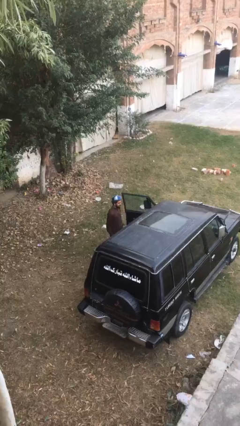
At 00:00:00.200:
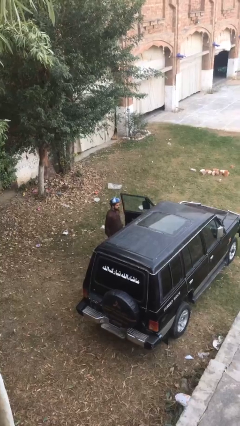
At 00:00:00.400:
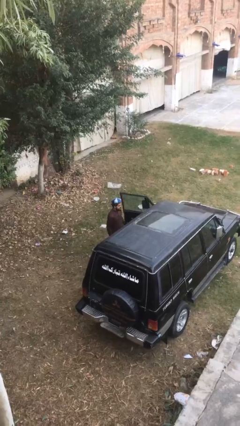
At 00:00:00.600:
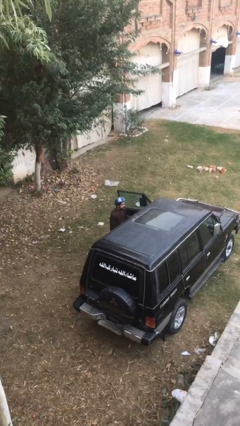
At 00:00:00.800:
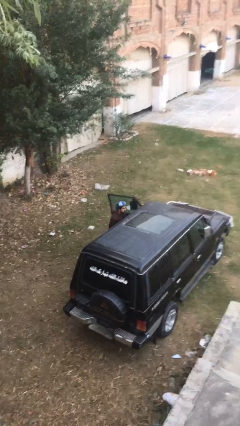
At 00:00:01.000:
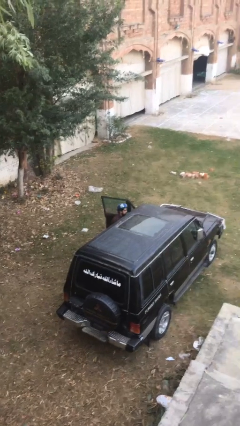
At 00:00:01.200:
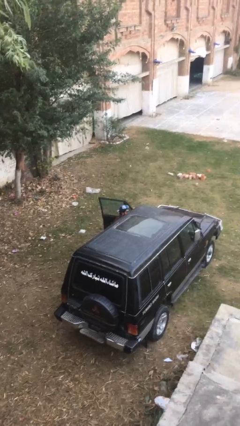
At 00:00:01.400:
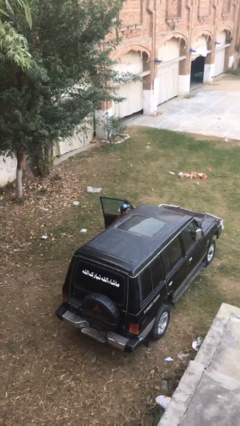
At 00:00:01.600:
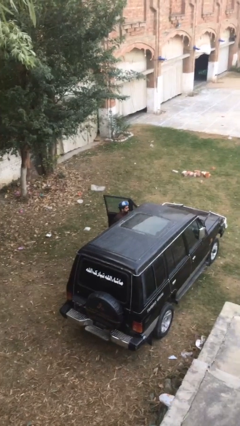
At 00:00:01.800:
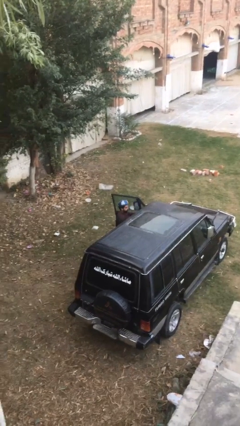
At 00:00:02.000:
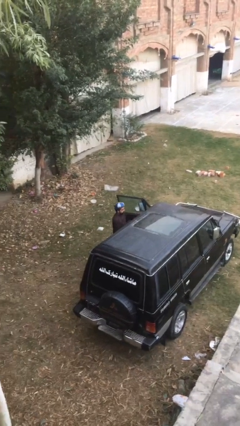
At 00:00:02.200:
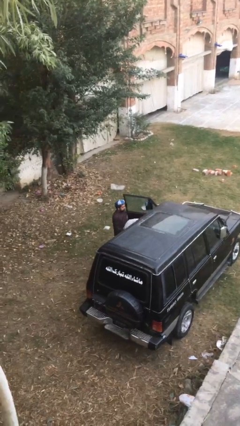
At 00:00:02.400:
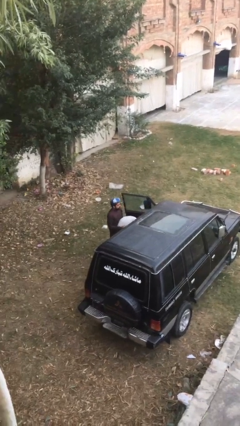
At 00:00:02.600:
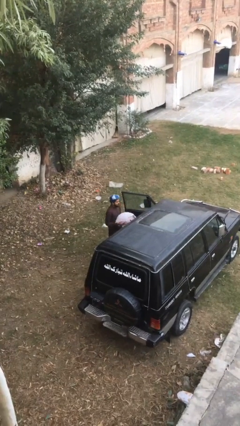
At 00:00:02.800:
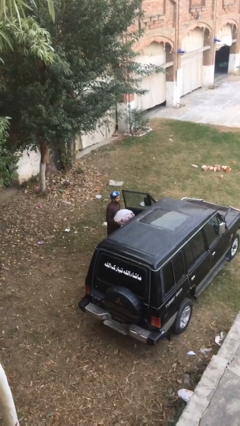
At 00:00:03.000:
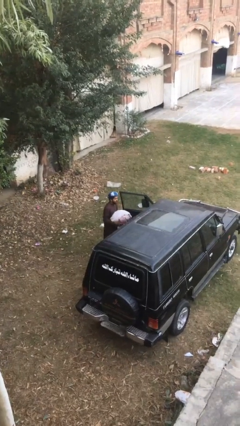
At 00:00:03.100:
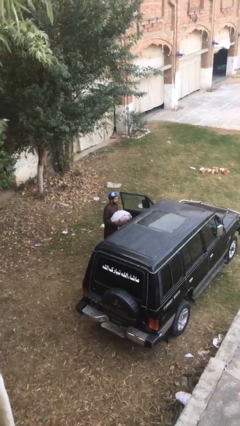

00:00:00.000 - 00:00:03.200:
person unloads car

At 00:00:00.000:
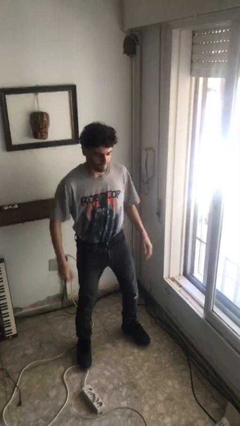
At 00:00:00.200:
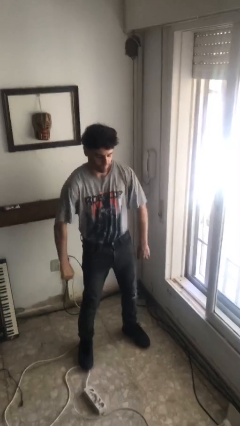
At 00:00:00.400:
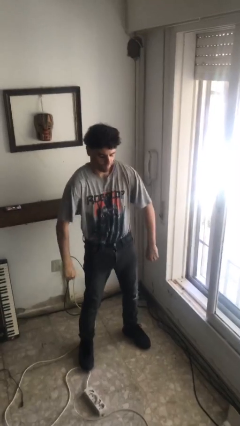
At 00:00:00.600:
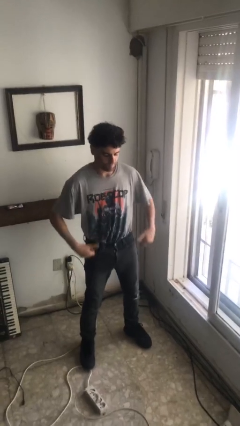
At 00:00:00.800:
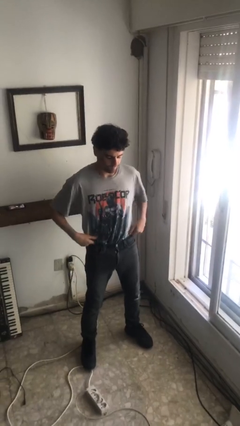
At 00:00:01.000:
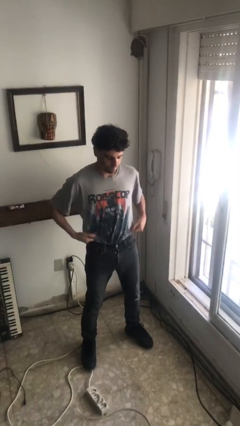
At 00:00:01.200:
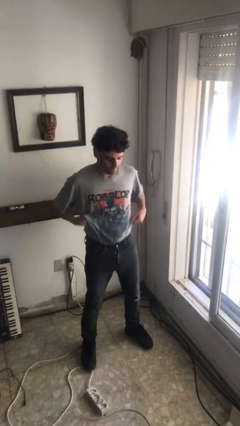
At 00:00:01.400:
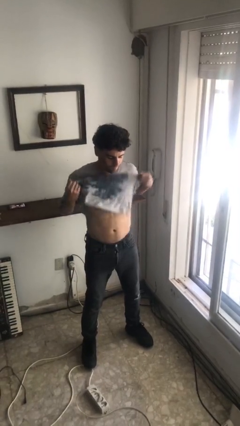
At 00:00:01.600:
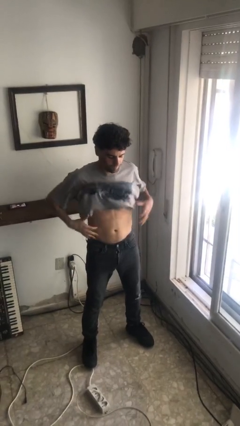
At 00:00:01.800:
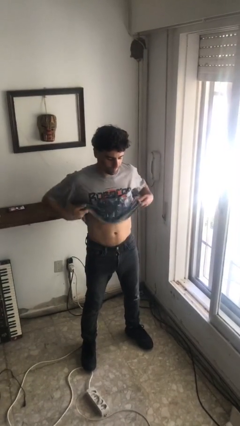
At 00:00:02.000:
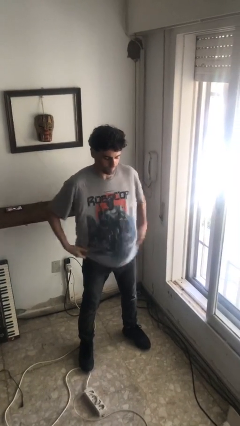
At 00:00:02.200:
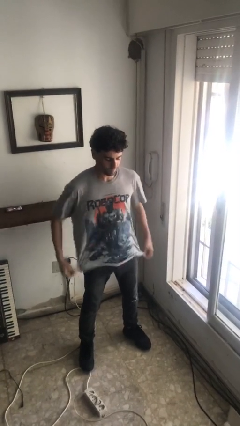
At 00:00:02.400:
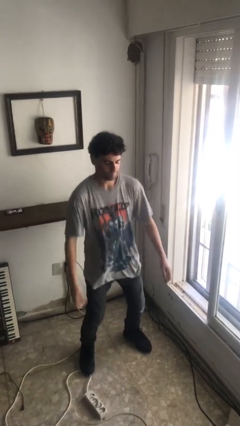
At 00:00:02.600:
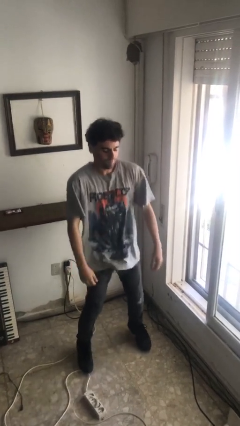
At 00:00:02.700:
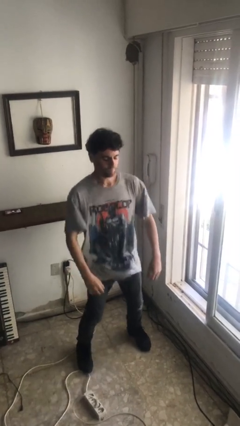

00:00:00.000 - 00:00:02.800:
person untucks shirt

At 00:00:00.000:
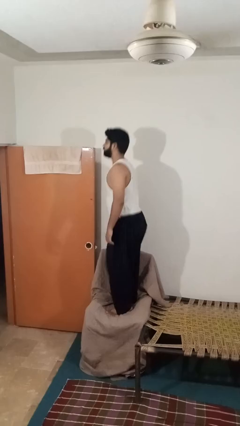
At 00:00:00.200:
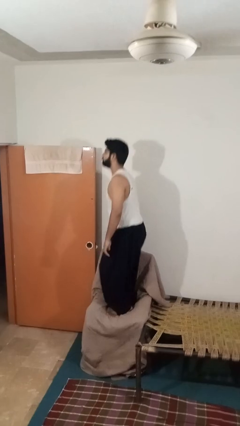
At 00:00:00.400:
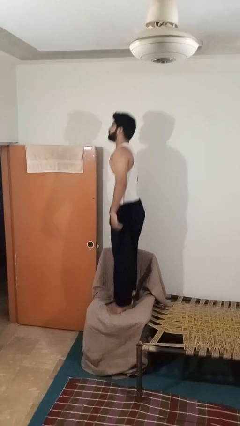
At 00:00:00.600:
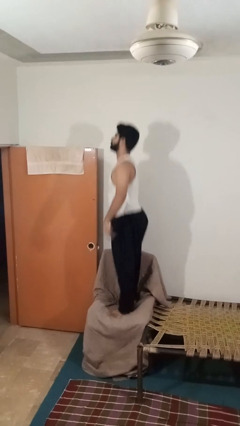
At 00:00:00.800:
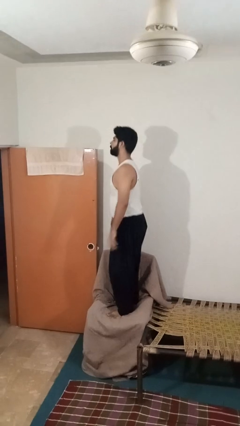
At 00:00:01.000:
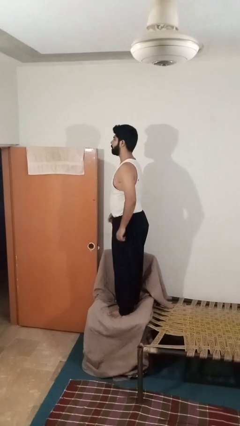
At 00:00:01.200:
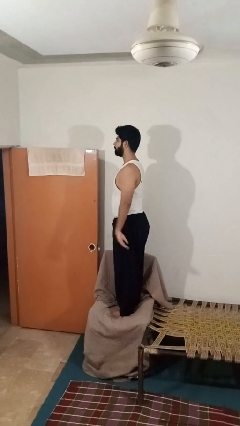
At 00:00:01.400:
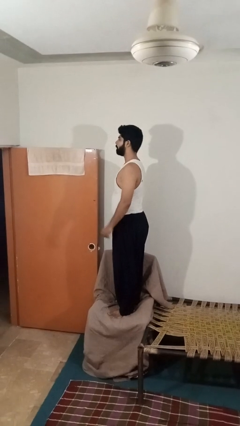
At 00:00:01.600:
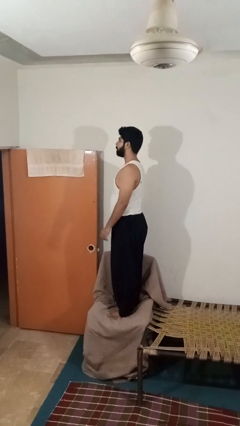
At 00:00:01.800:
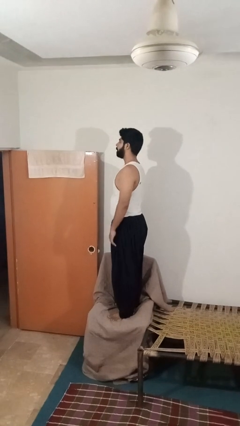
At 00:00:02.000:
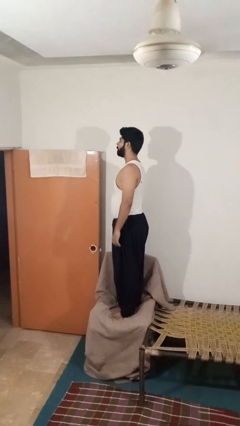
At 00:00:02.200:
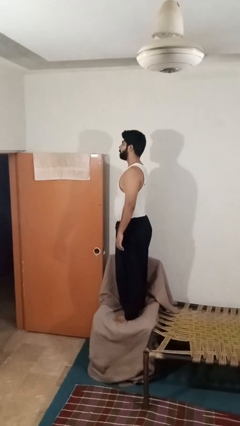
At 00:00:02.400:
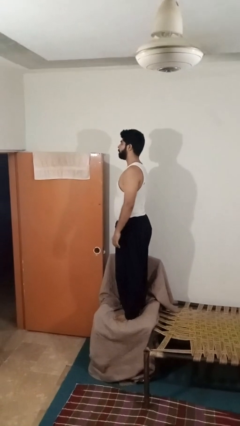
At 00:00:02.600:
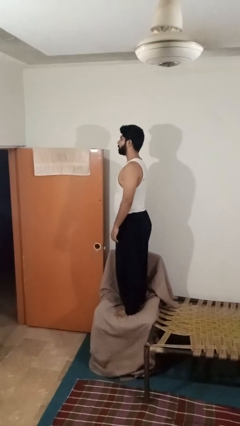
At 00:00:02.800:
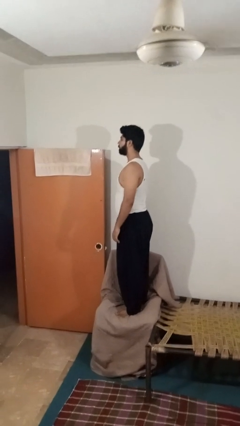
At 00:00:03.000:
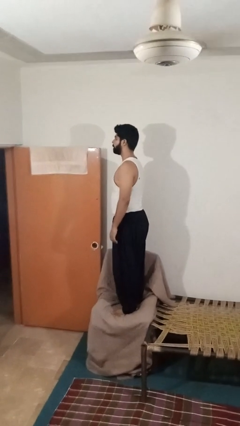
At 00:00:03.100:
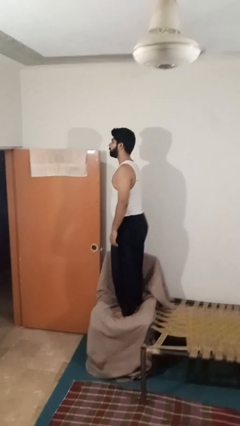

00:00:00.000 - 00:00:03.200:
person jumps on couch

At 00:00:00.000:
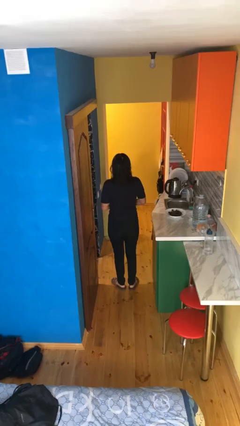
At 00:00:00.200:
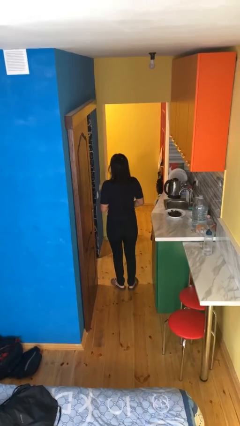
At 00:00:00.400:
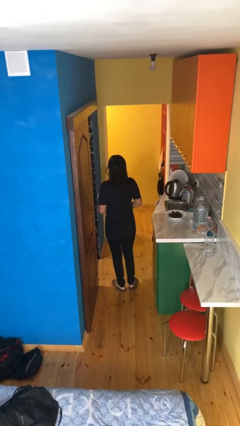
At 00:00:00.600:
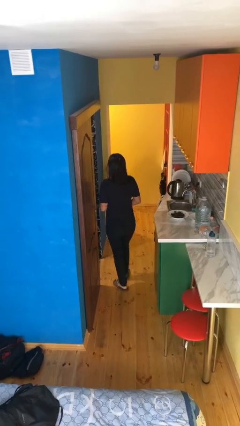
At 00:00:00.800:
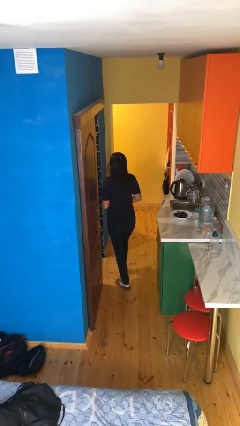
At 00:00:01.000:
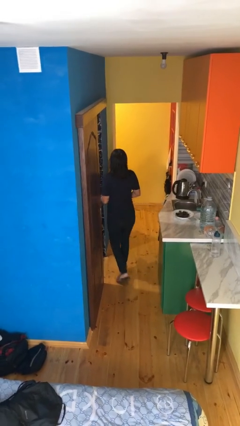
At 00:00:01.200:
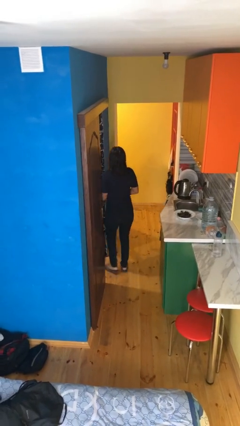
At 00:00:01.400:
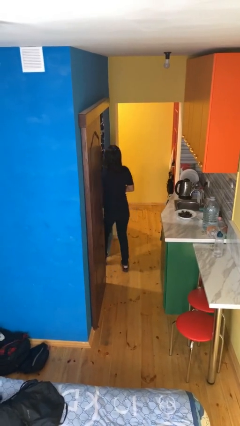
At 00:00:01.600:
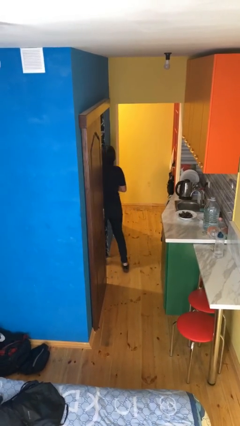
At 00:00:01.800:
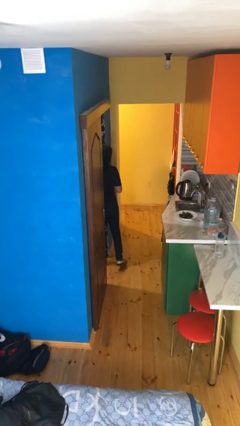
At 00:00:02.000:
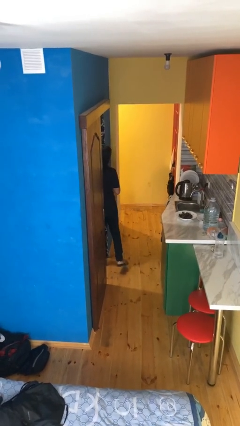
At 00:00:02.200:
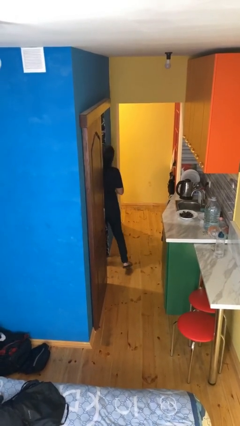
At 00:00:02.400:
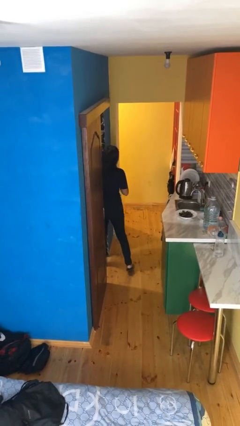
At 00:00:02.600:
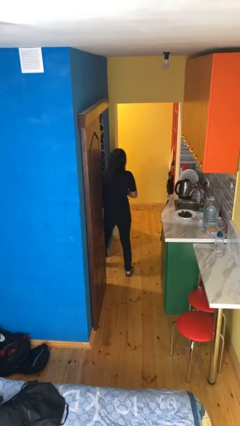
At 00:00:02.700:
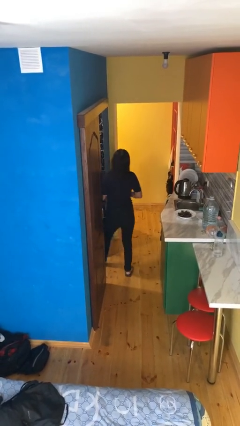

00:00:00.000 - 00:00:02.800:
person bumps into wall

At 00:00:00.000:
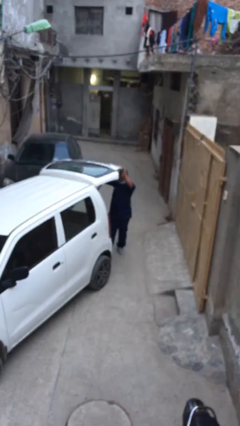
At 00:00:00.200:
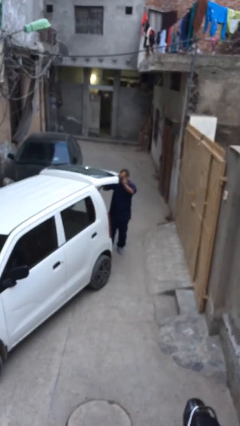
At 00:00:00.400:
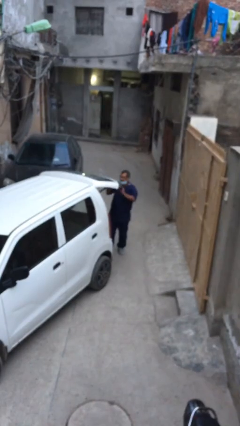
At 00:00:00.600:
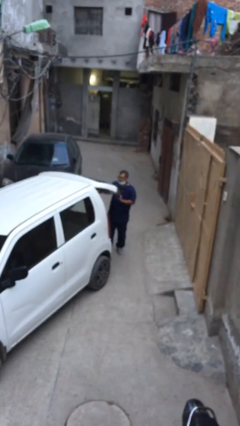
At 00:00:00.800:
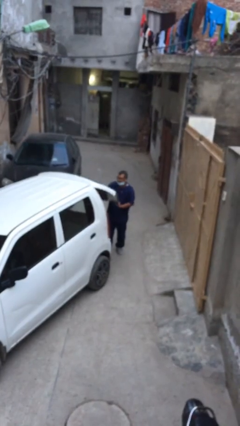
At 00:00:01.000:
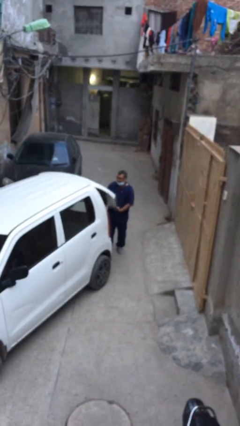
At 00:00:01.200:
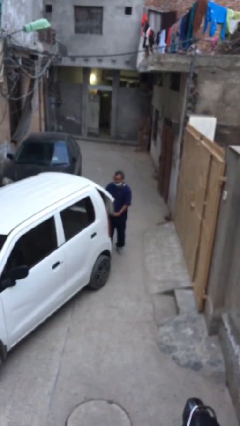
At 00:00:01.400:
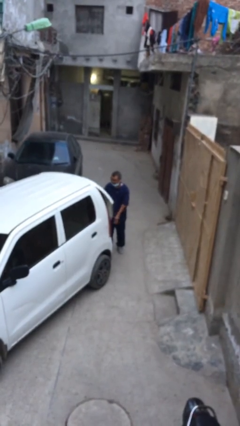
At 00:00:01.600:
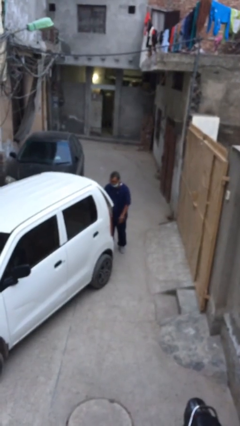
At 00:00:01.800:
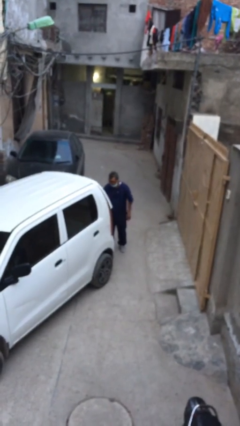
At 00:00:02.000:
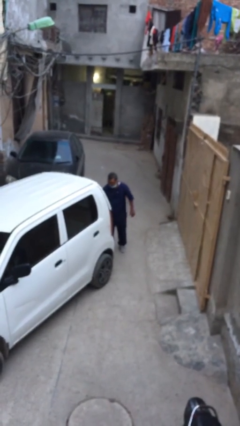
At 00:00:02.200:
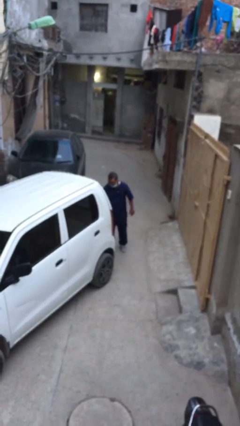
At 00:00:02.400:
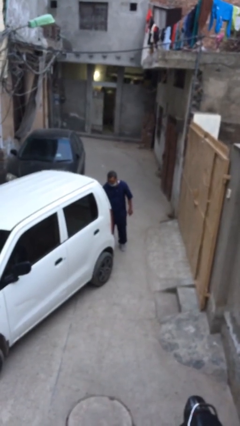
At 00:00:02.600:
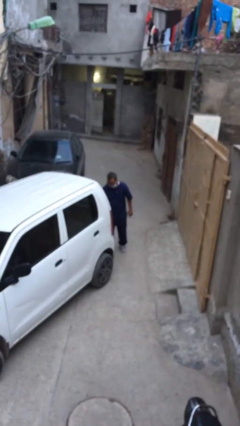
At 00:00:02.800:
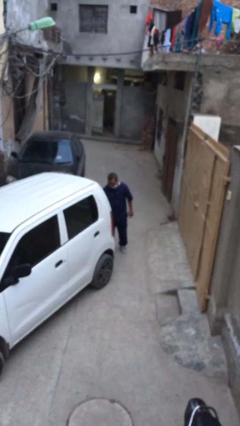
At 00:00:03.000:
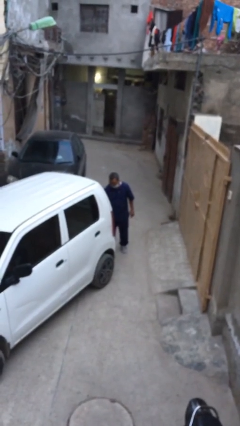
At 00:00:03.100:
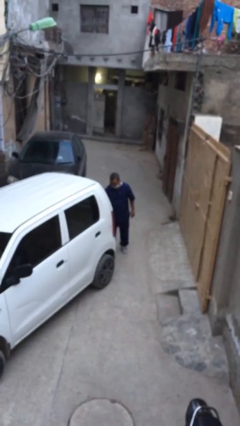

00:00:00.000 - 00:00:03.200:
person closes car trunk

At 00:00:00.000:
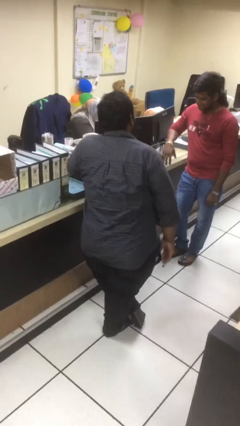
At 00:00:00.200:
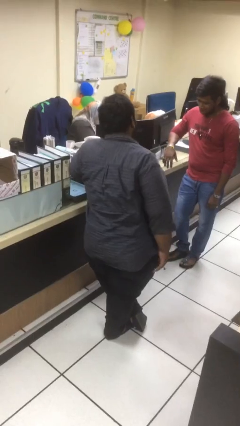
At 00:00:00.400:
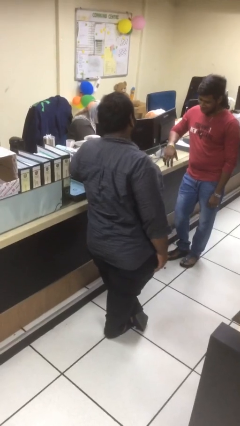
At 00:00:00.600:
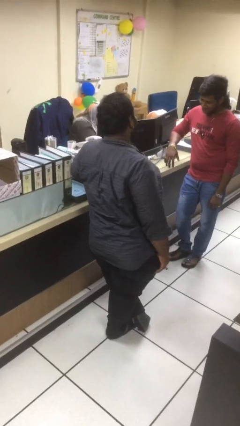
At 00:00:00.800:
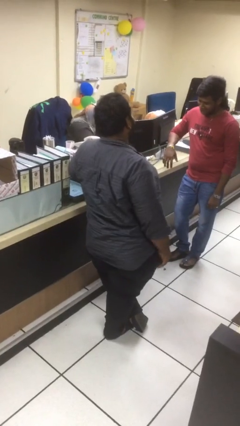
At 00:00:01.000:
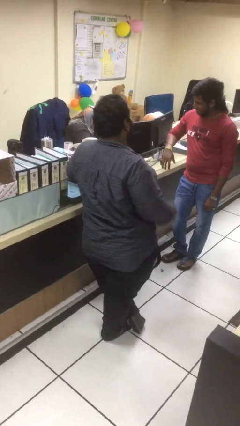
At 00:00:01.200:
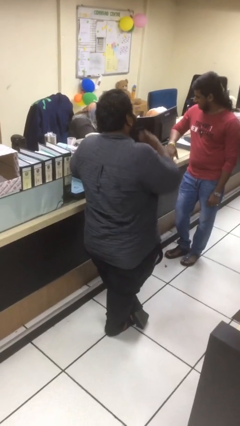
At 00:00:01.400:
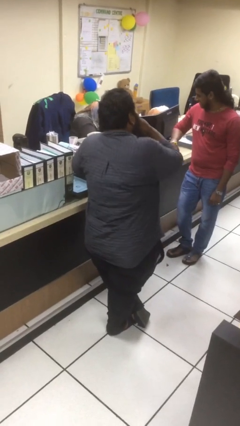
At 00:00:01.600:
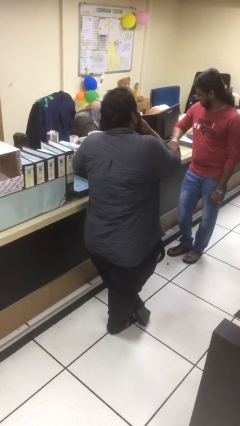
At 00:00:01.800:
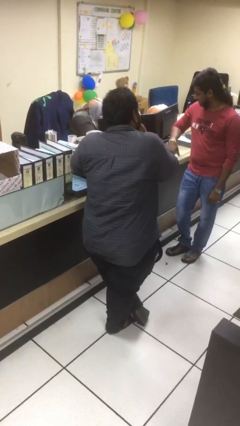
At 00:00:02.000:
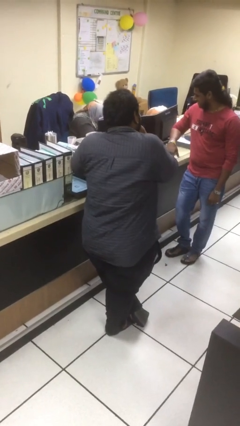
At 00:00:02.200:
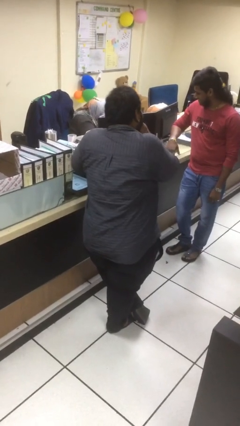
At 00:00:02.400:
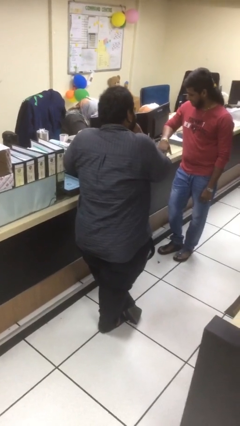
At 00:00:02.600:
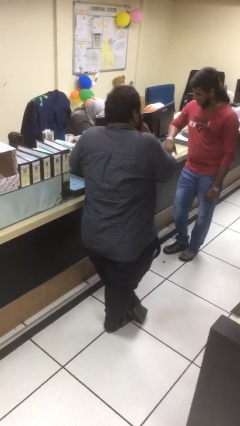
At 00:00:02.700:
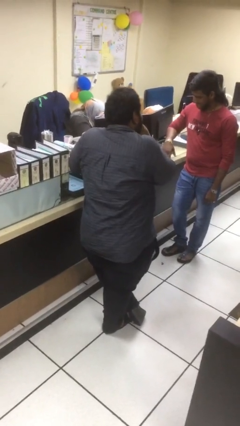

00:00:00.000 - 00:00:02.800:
person laughs with person
